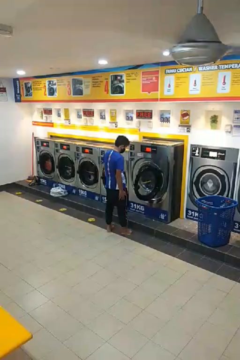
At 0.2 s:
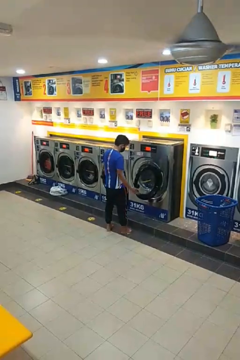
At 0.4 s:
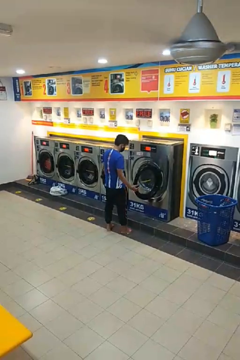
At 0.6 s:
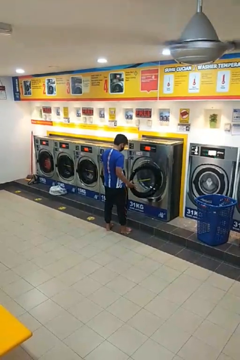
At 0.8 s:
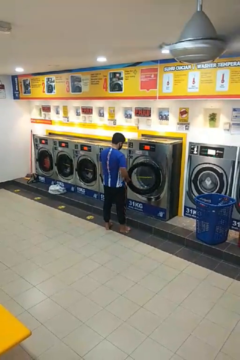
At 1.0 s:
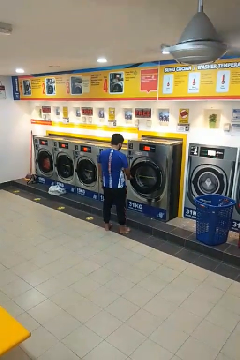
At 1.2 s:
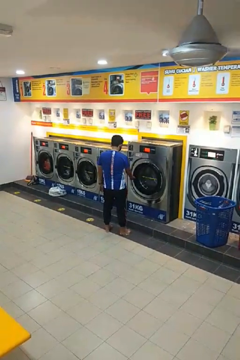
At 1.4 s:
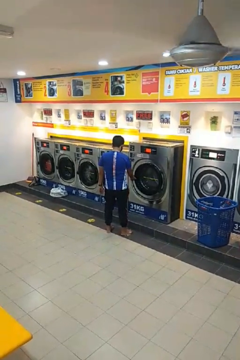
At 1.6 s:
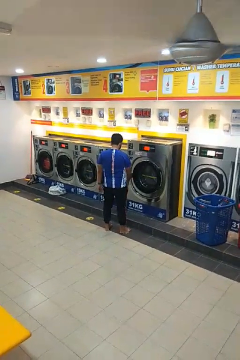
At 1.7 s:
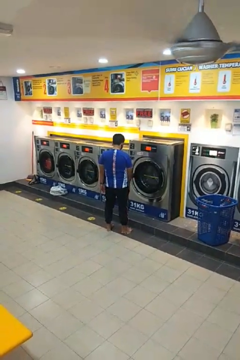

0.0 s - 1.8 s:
person closes clothes washer

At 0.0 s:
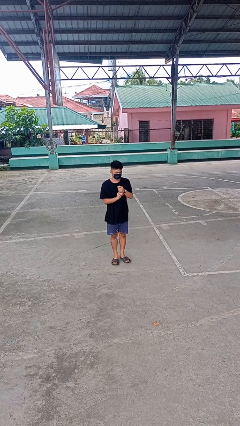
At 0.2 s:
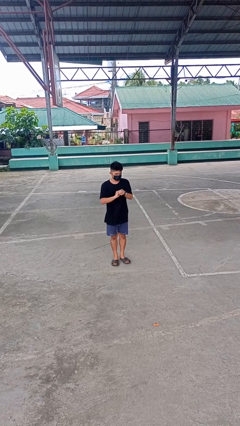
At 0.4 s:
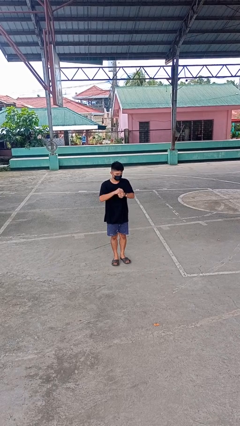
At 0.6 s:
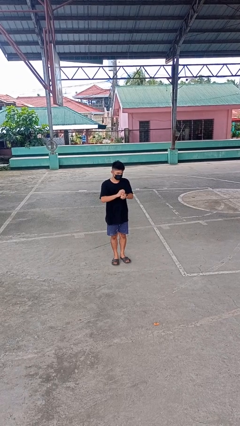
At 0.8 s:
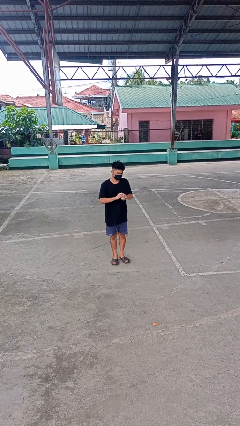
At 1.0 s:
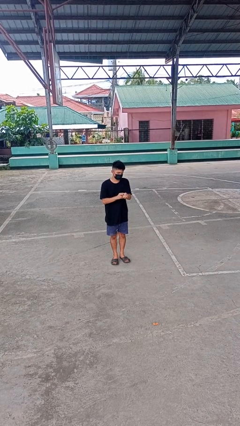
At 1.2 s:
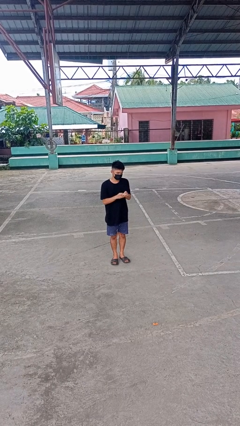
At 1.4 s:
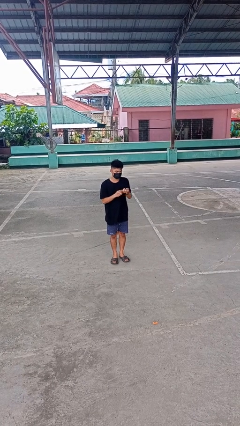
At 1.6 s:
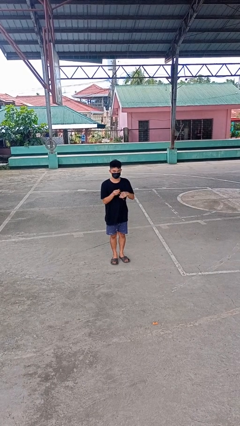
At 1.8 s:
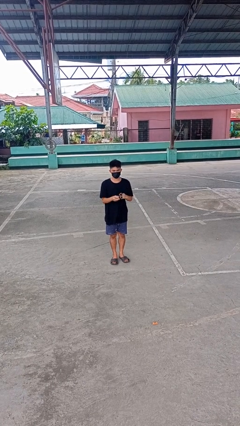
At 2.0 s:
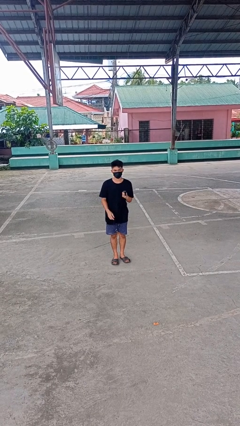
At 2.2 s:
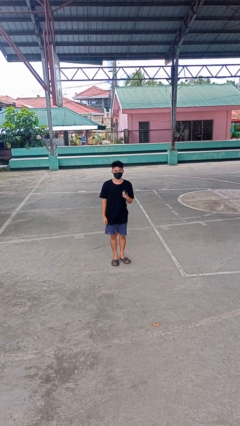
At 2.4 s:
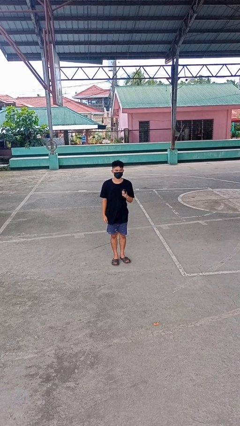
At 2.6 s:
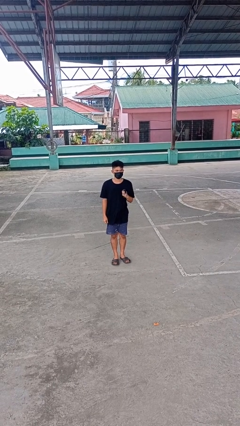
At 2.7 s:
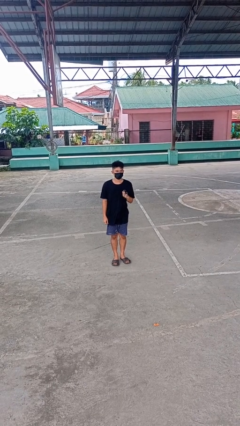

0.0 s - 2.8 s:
person takes off wristwatch

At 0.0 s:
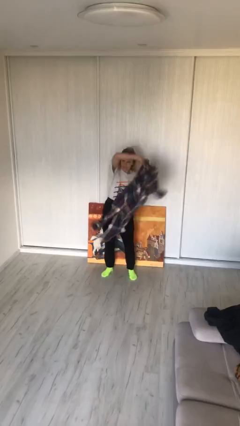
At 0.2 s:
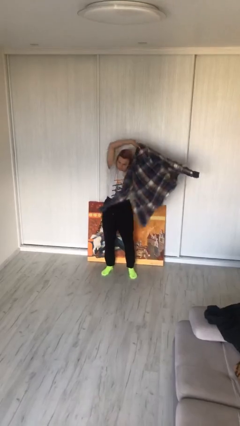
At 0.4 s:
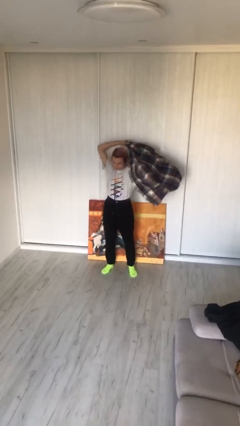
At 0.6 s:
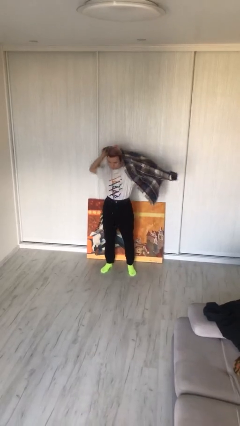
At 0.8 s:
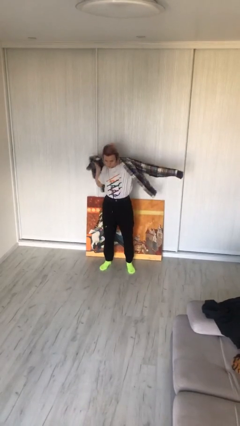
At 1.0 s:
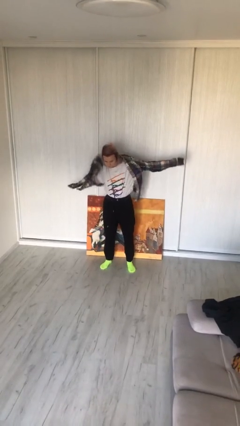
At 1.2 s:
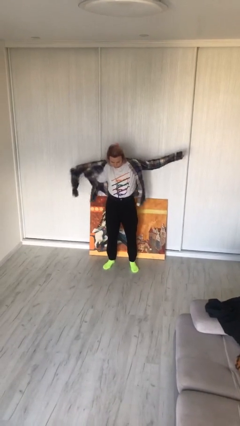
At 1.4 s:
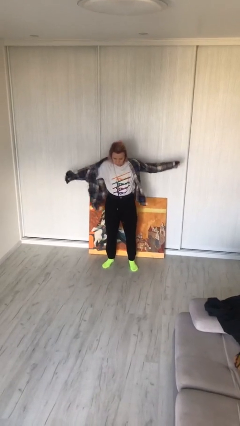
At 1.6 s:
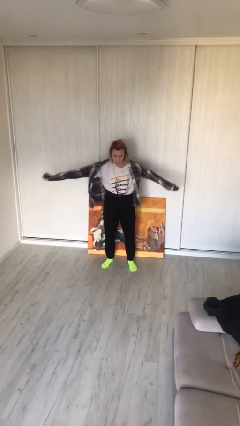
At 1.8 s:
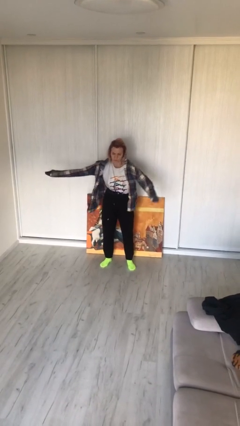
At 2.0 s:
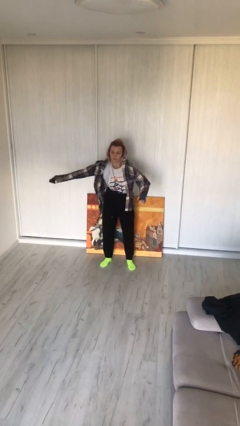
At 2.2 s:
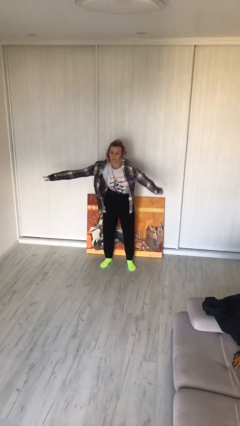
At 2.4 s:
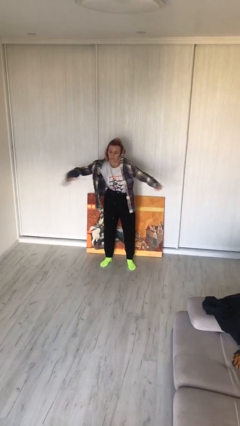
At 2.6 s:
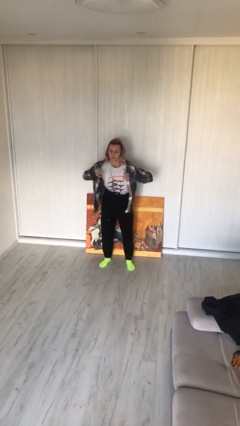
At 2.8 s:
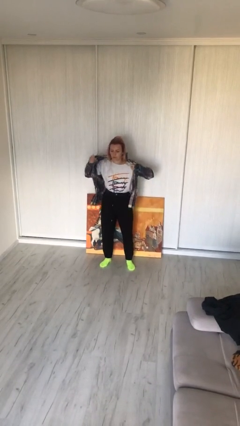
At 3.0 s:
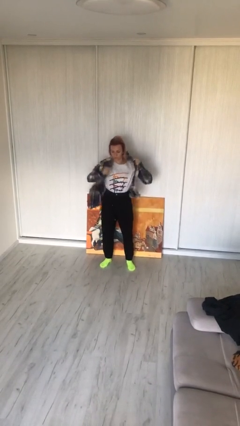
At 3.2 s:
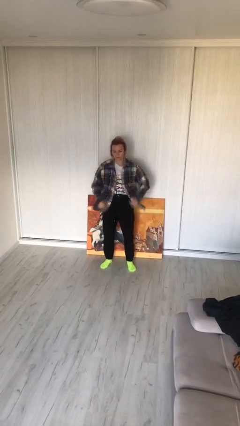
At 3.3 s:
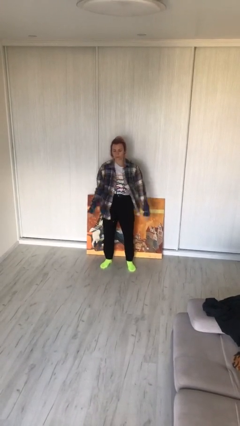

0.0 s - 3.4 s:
person puts on shirt

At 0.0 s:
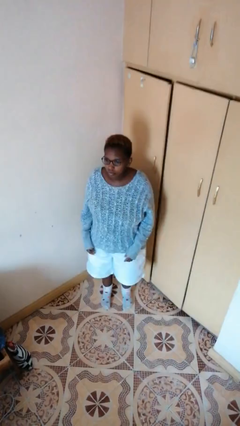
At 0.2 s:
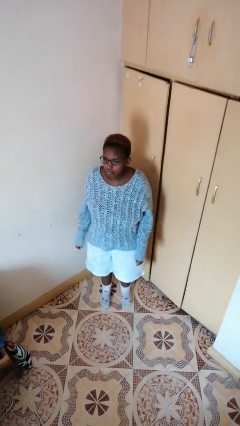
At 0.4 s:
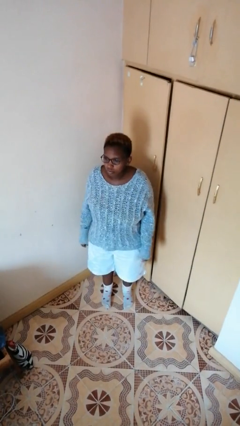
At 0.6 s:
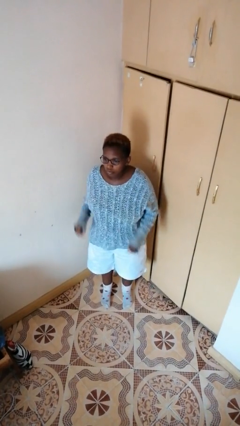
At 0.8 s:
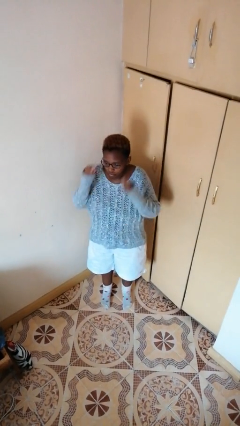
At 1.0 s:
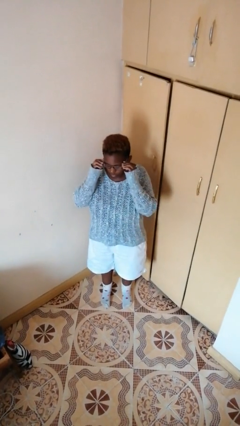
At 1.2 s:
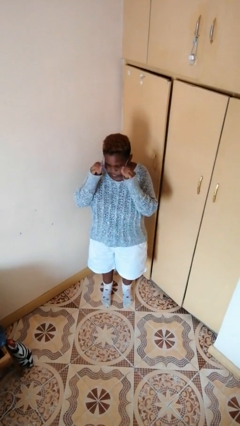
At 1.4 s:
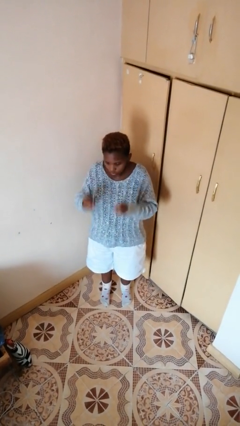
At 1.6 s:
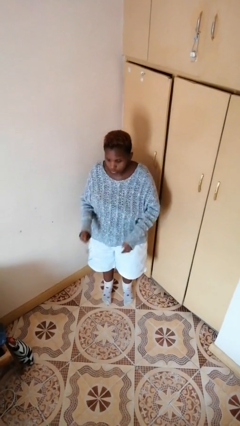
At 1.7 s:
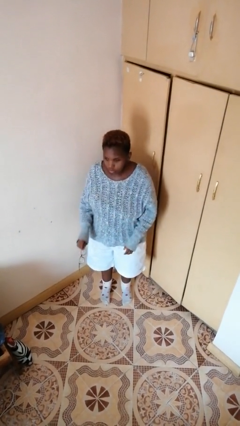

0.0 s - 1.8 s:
person takes off glasses

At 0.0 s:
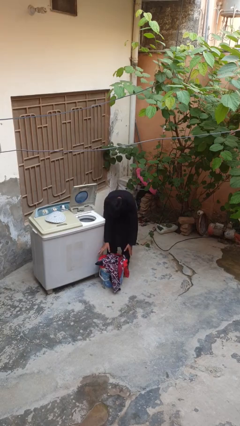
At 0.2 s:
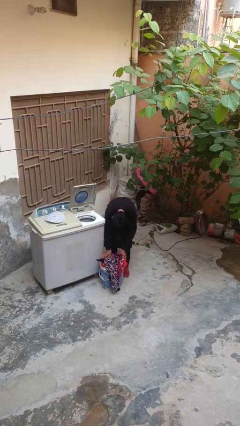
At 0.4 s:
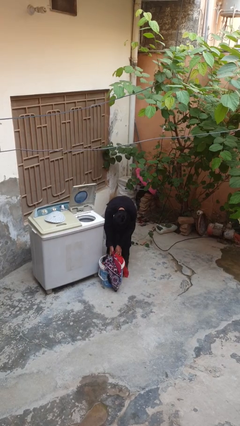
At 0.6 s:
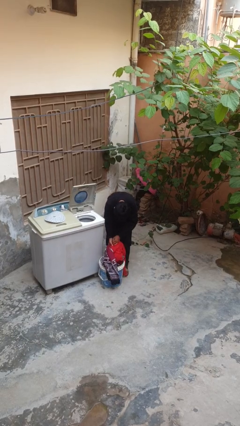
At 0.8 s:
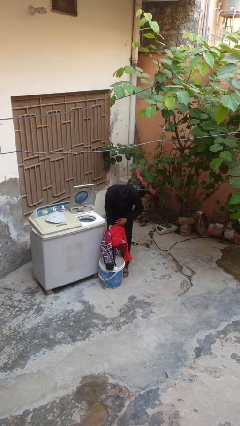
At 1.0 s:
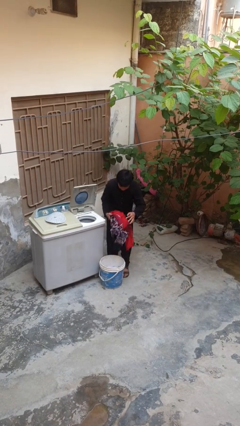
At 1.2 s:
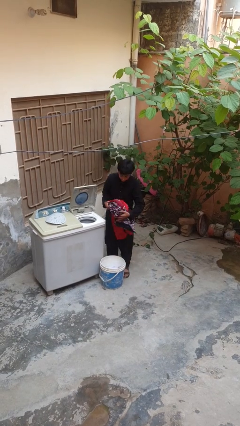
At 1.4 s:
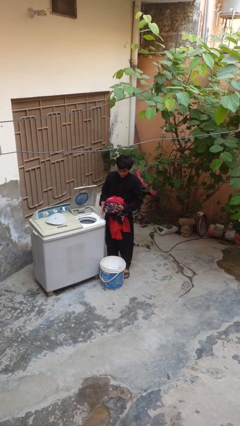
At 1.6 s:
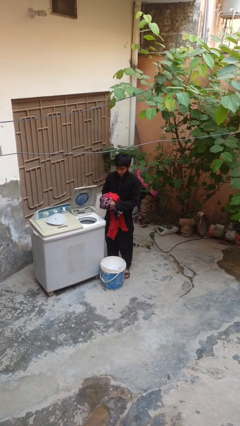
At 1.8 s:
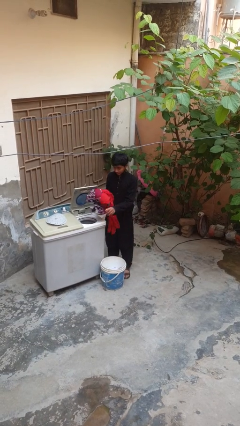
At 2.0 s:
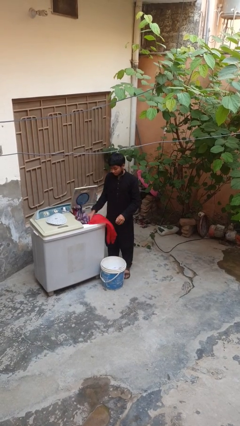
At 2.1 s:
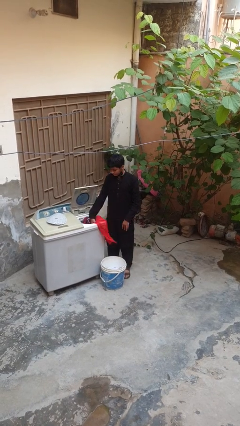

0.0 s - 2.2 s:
person loads dryer

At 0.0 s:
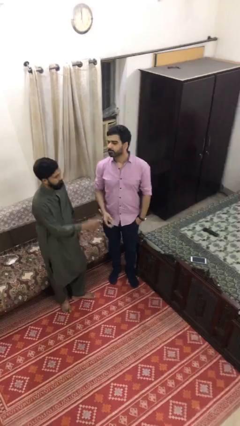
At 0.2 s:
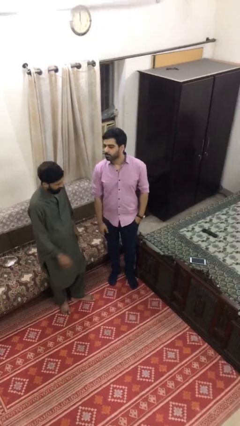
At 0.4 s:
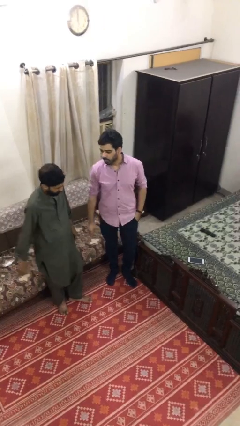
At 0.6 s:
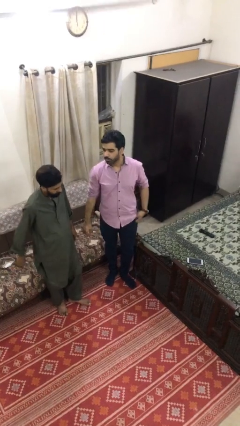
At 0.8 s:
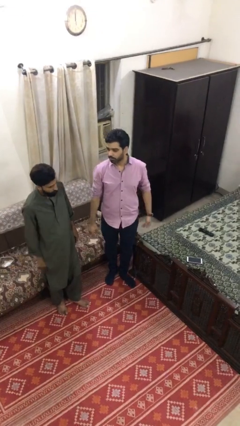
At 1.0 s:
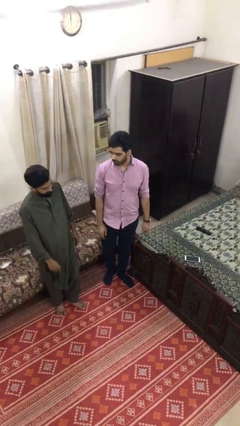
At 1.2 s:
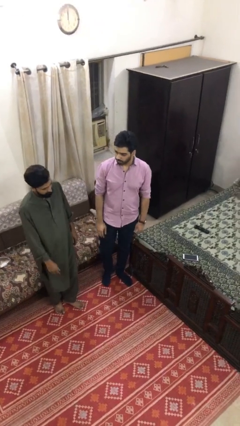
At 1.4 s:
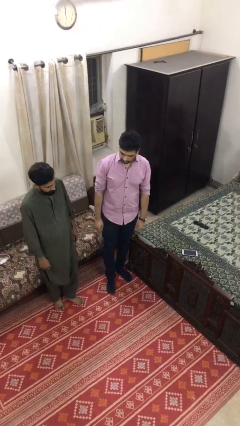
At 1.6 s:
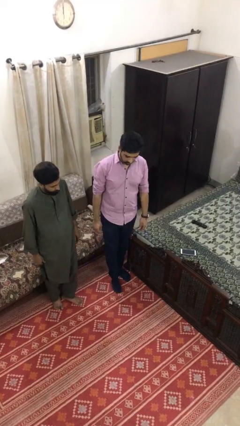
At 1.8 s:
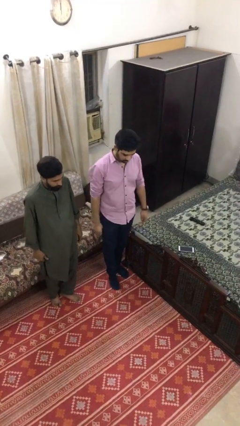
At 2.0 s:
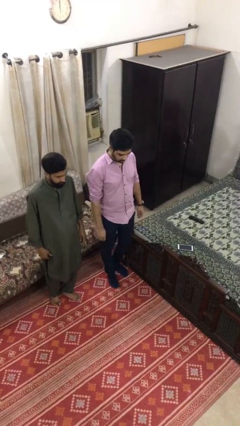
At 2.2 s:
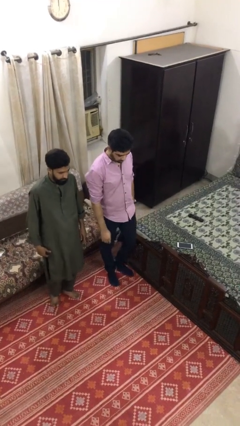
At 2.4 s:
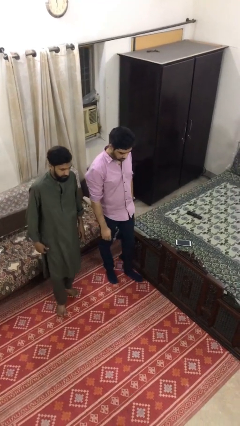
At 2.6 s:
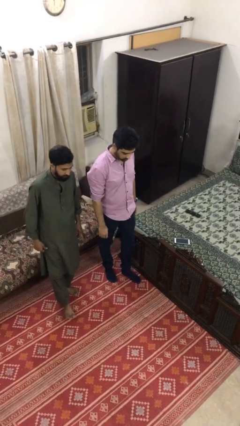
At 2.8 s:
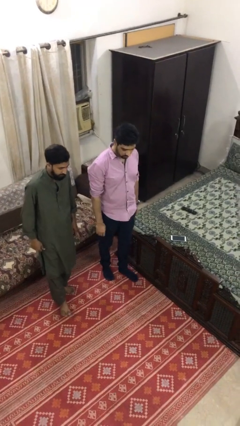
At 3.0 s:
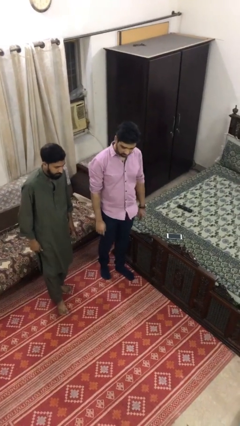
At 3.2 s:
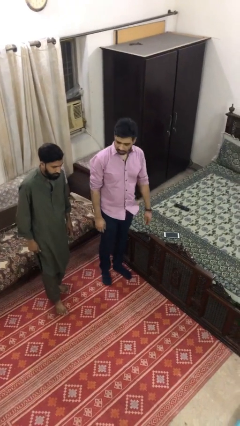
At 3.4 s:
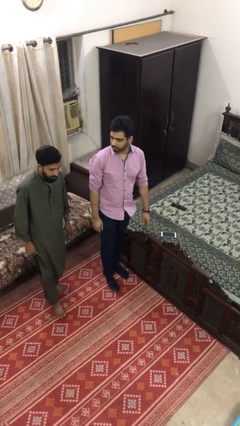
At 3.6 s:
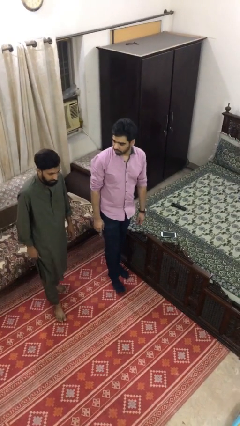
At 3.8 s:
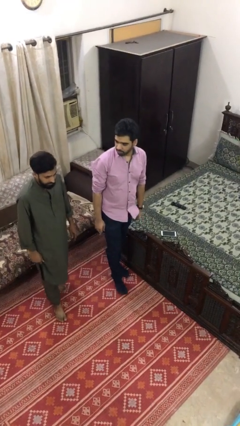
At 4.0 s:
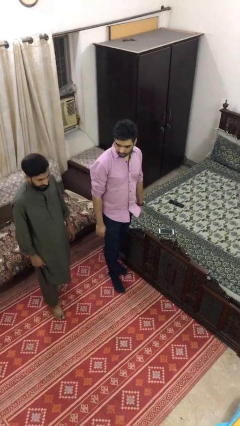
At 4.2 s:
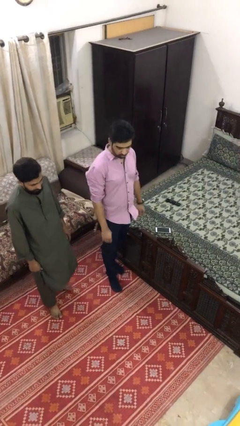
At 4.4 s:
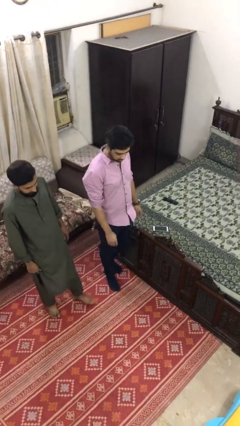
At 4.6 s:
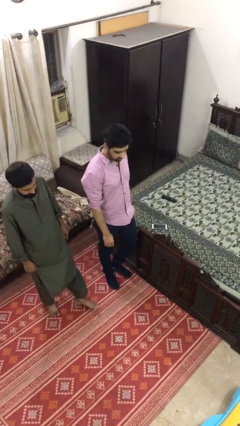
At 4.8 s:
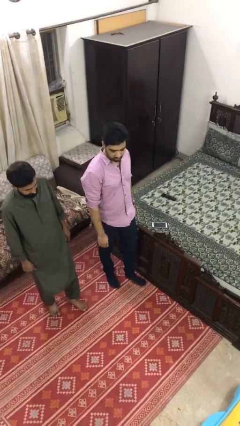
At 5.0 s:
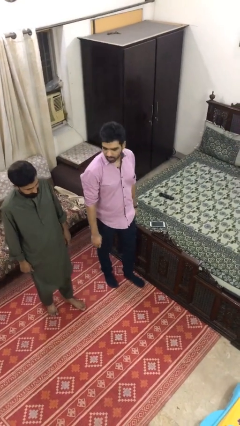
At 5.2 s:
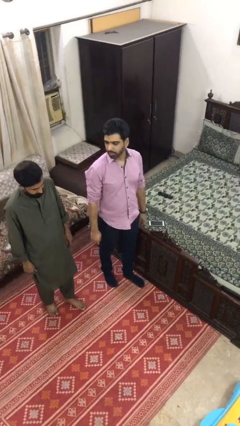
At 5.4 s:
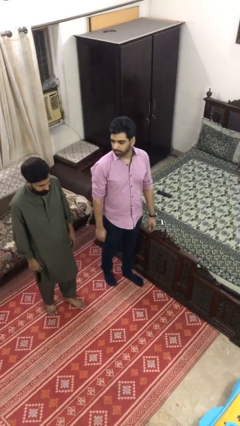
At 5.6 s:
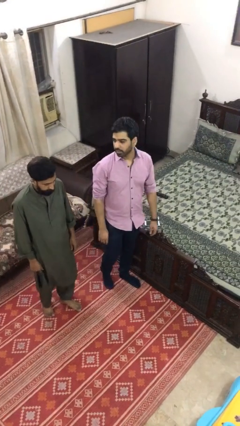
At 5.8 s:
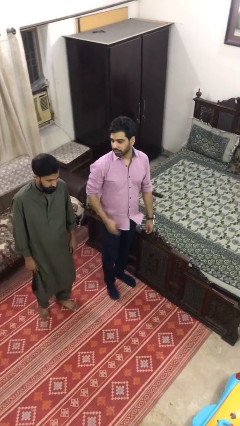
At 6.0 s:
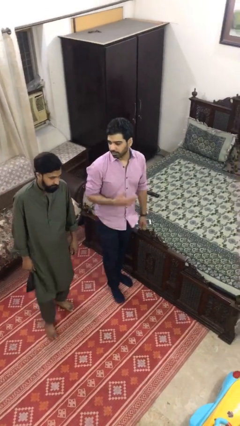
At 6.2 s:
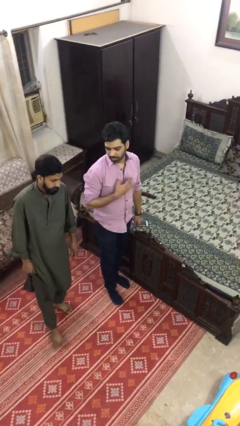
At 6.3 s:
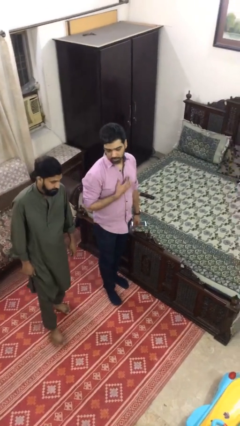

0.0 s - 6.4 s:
person talks to person
